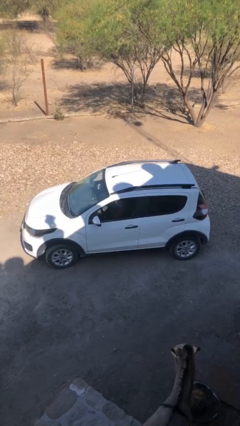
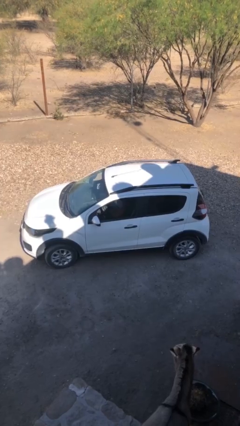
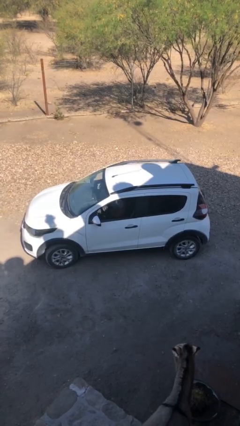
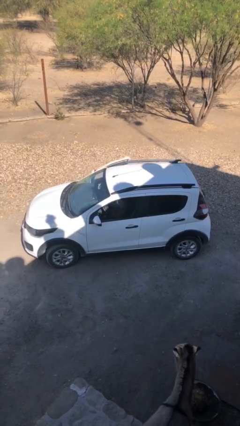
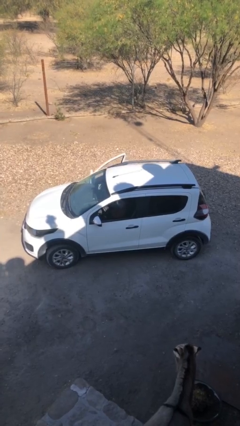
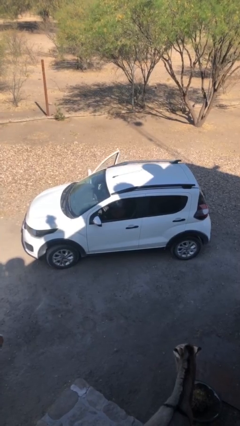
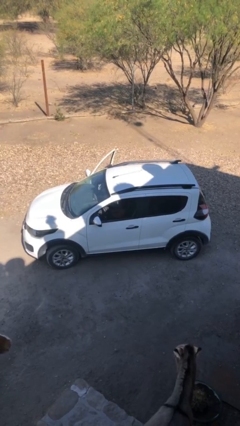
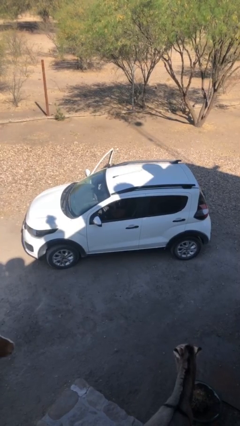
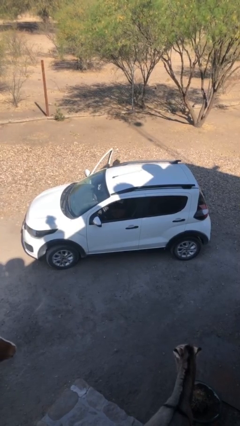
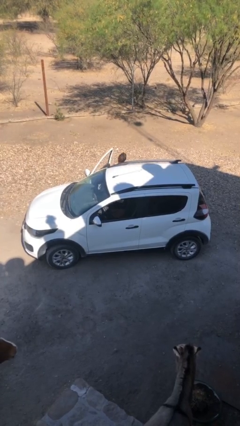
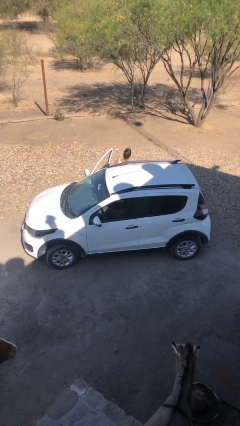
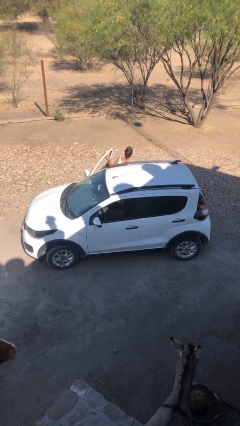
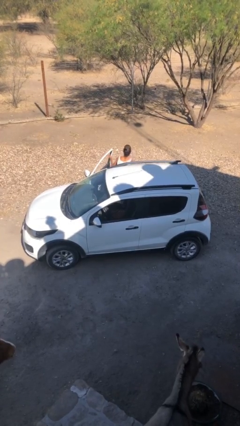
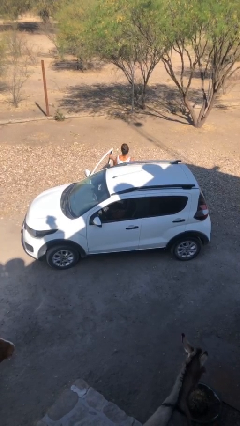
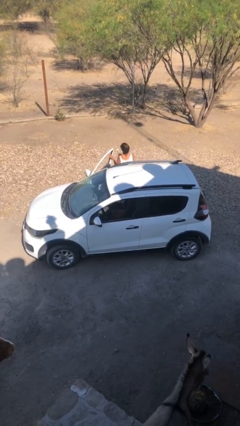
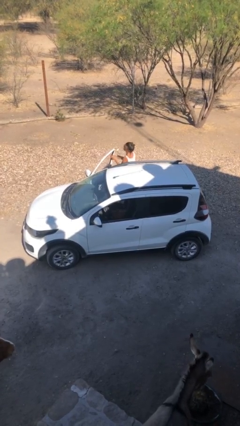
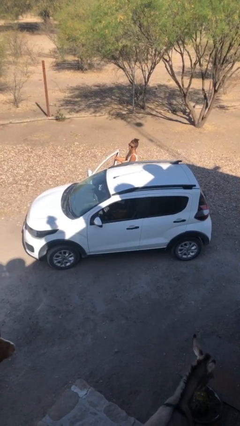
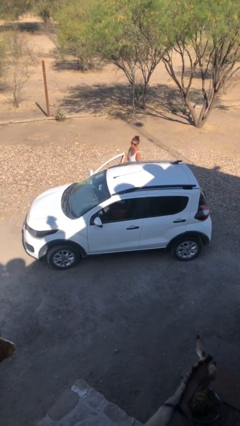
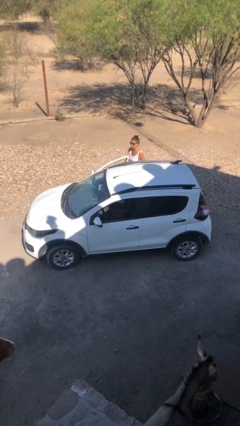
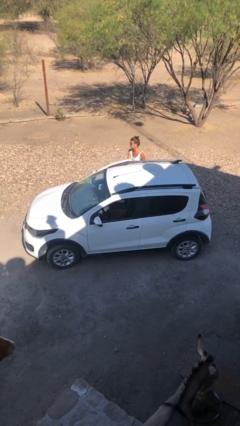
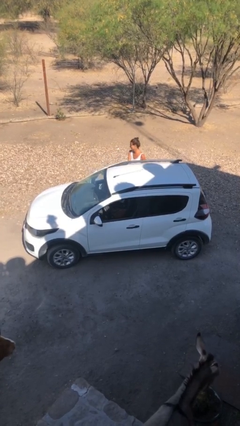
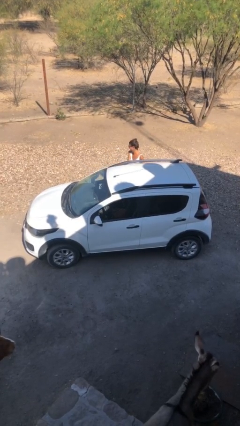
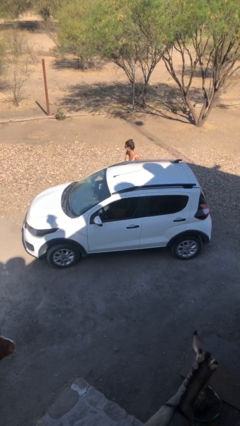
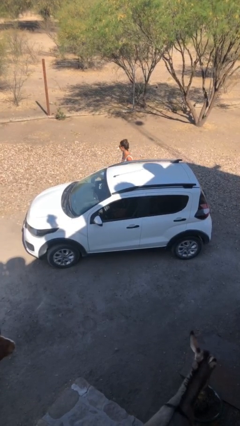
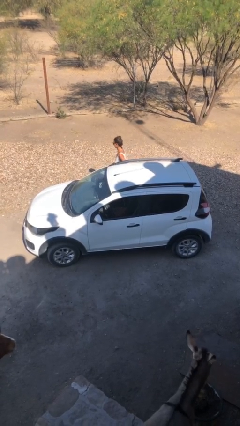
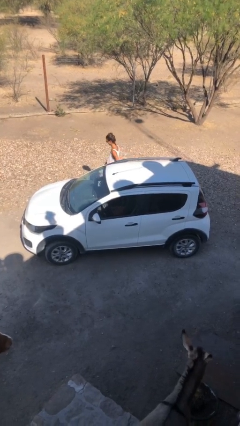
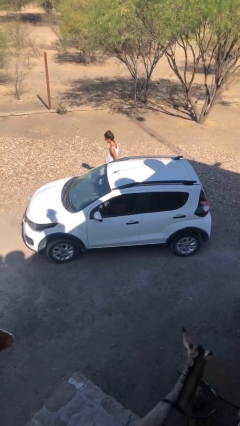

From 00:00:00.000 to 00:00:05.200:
car drops off person

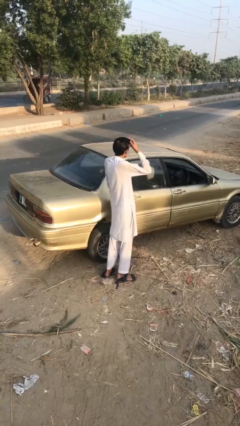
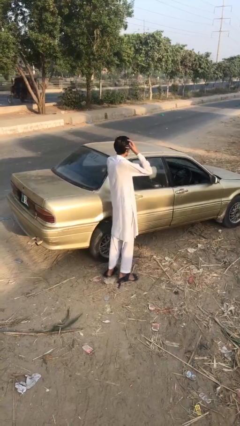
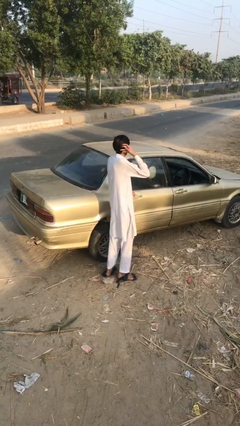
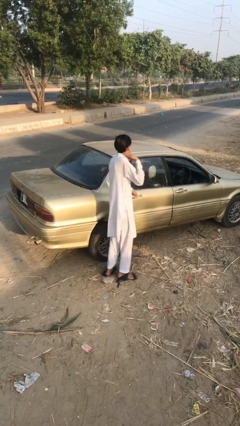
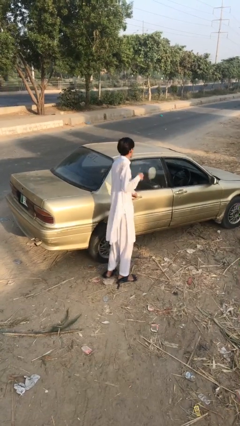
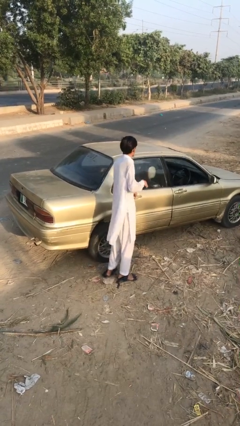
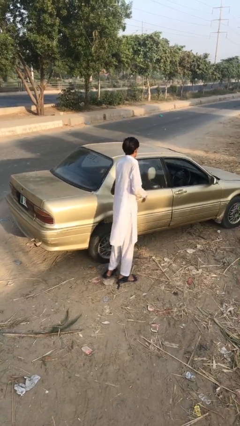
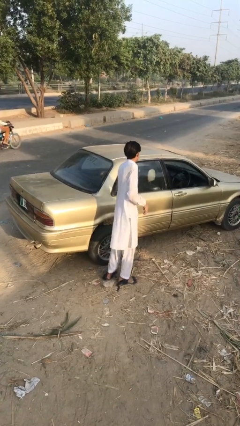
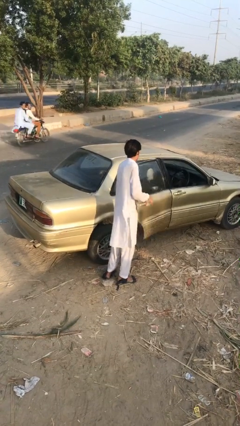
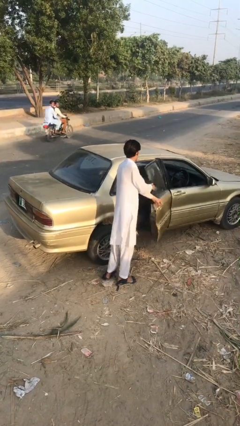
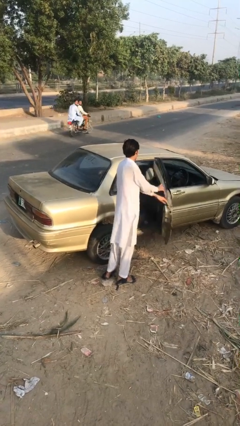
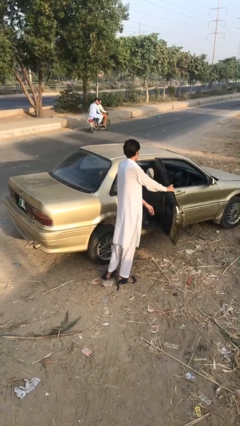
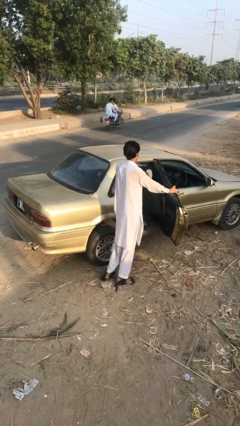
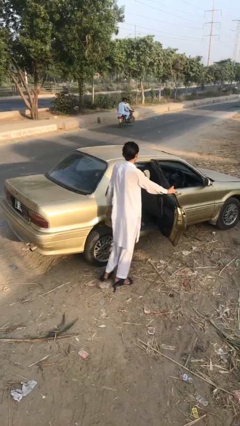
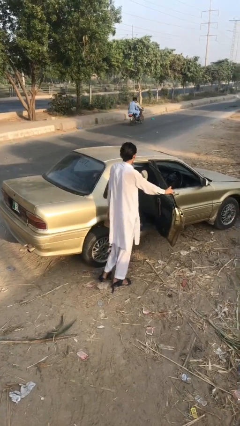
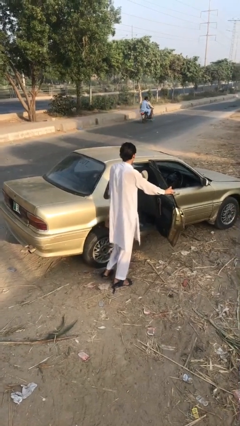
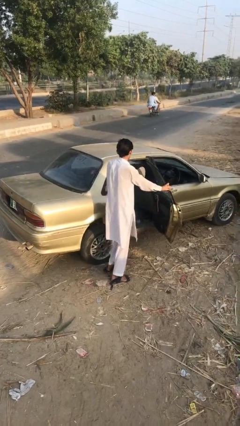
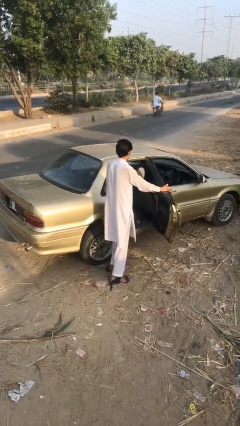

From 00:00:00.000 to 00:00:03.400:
person unloads car

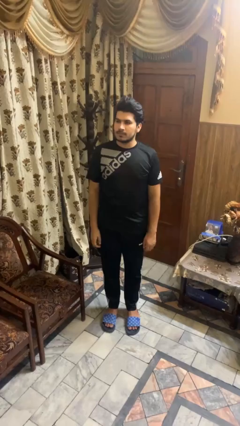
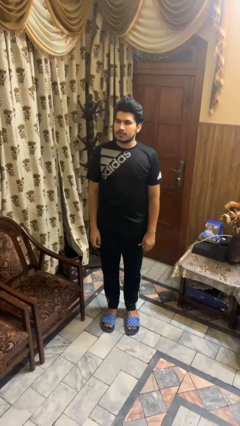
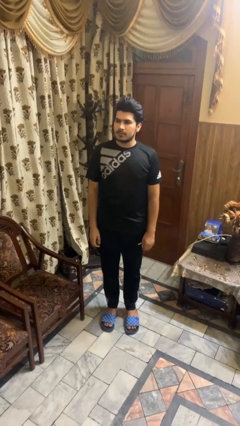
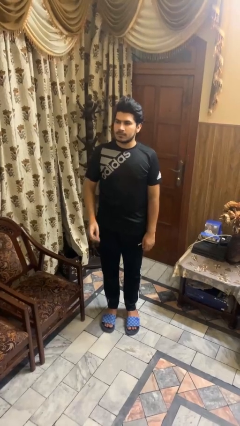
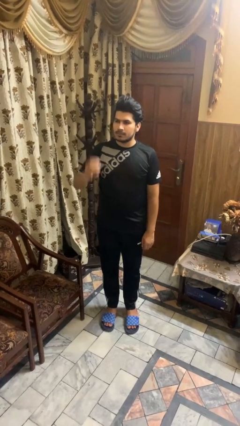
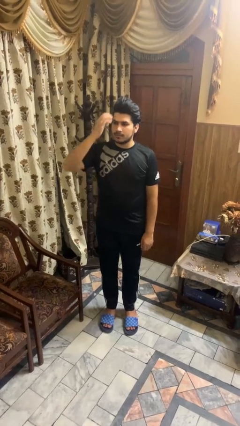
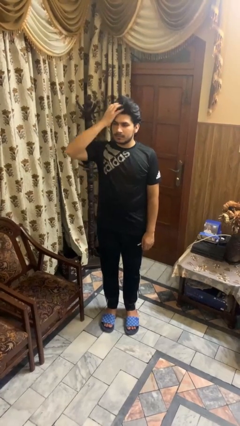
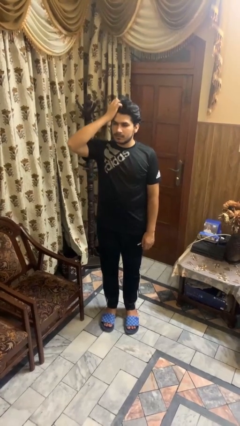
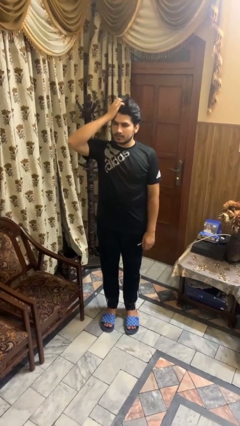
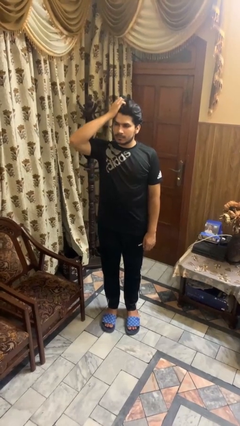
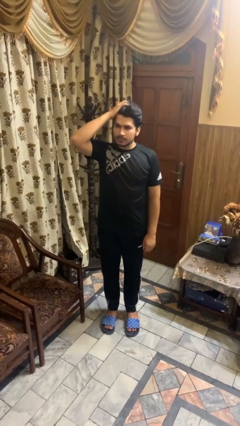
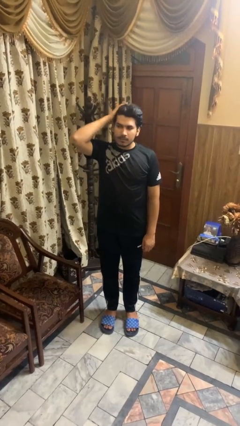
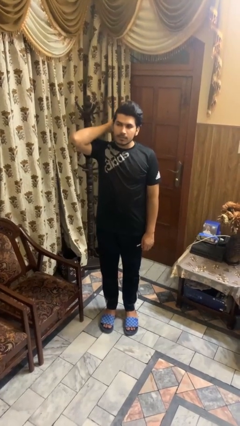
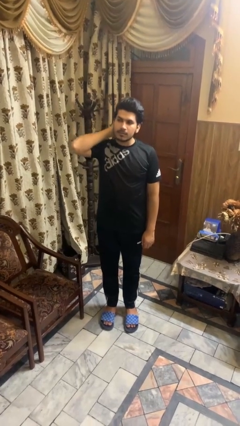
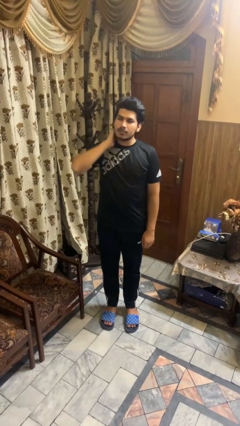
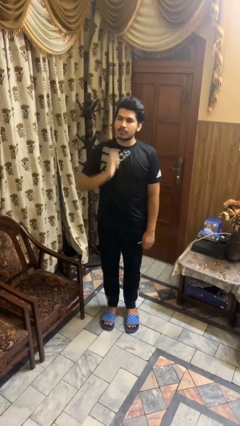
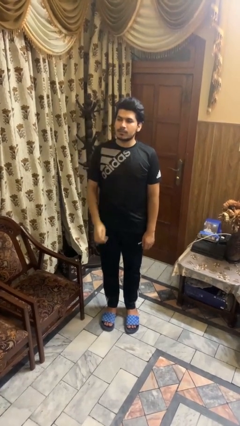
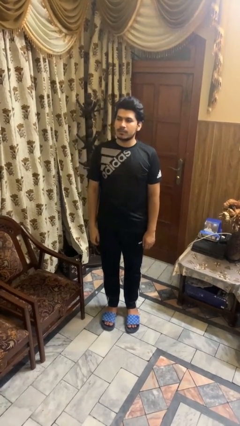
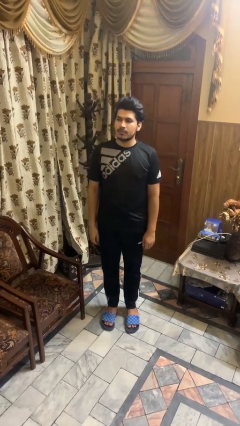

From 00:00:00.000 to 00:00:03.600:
person scratches face

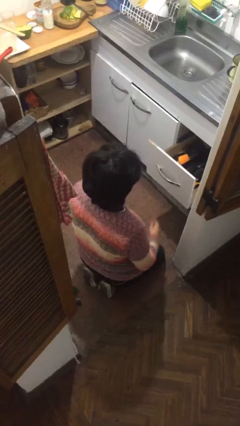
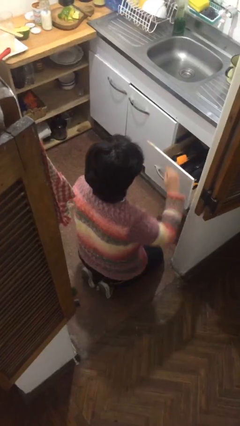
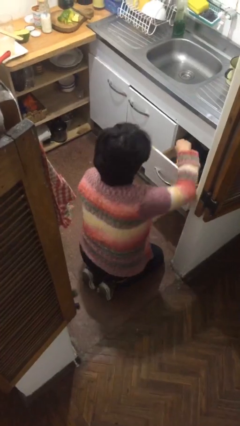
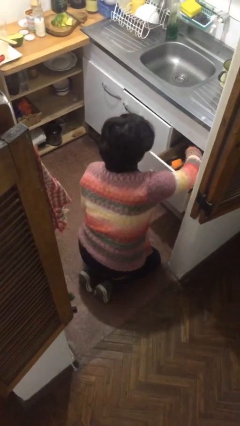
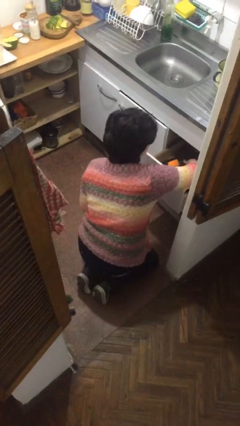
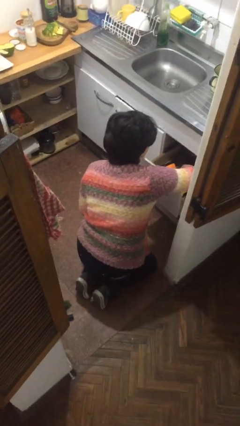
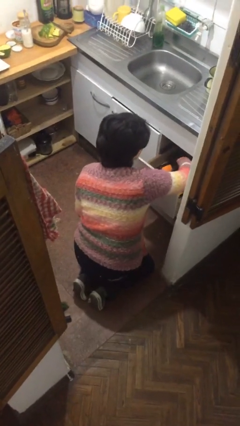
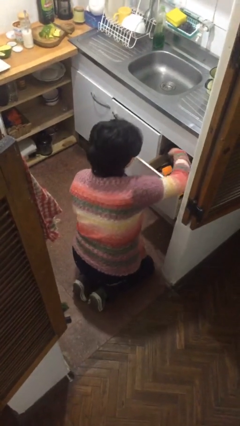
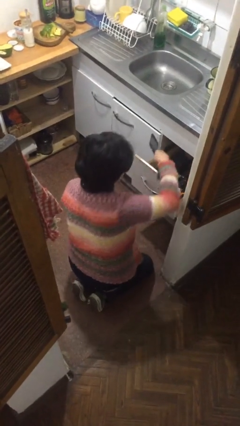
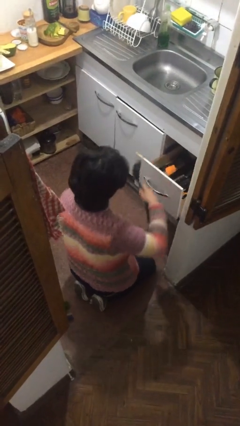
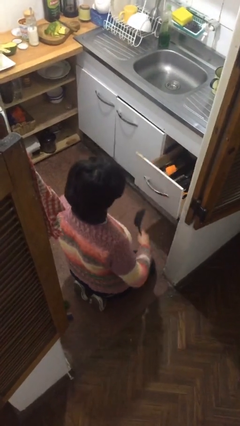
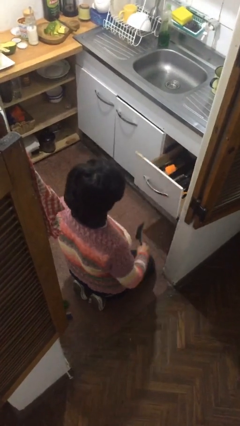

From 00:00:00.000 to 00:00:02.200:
person takes object from kitchen drawer

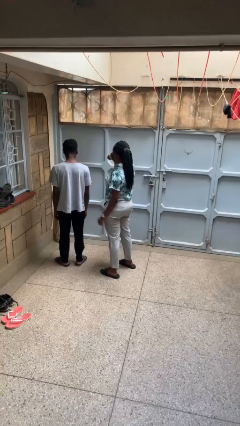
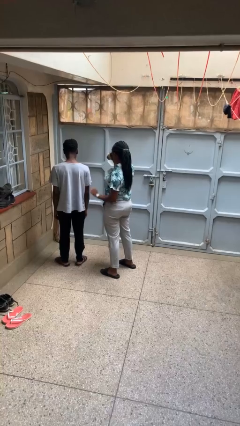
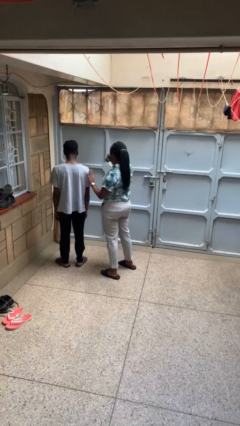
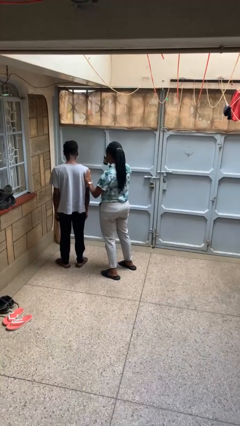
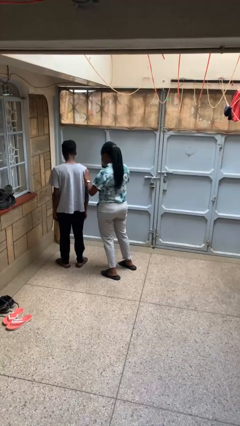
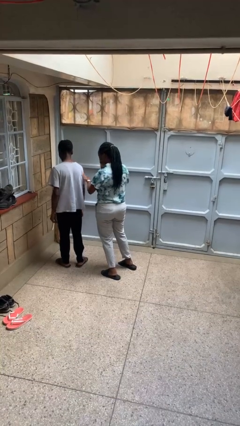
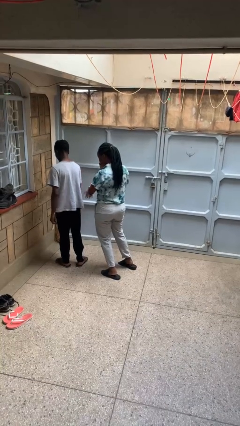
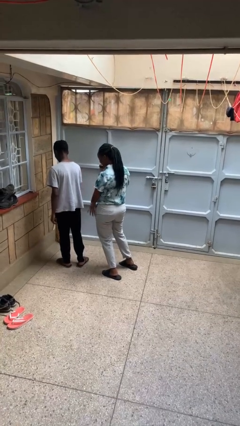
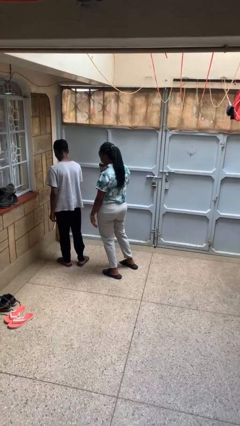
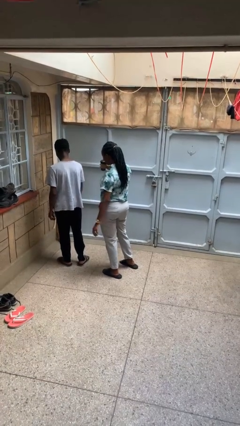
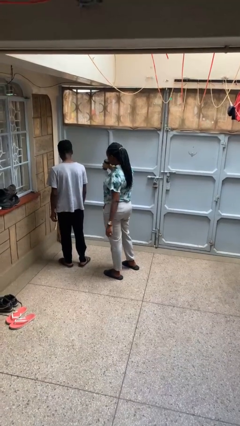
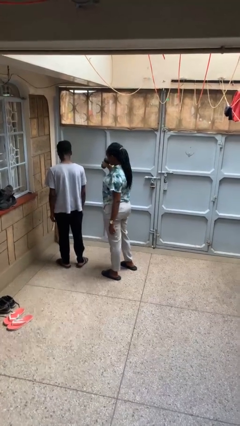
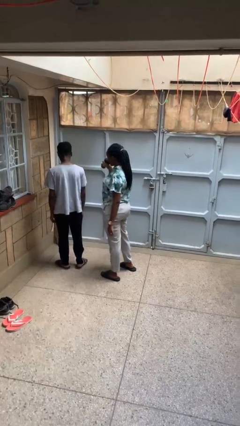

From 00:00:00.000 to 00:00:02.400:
person shoves person

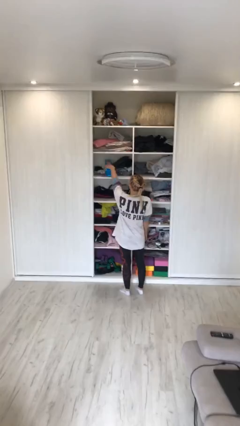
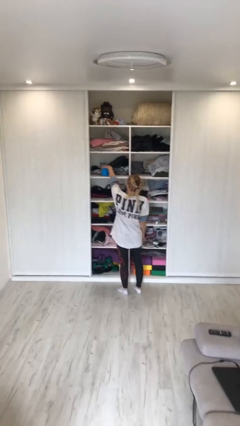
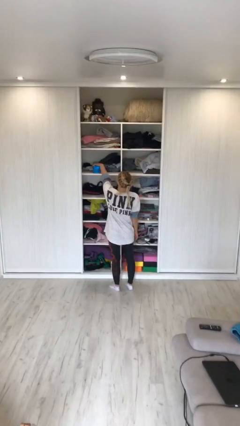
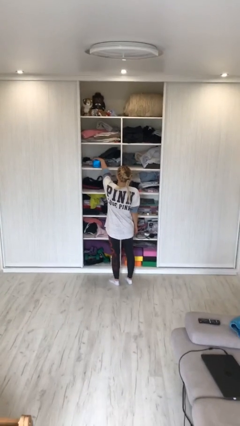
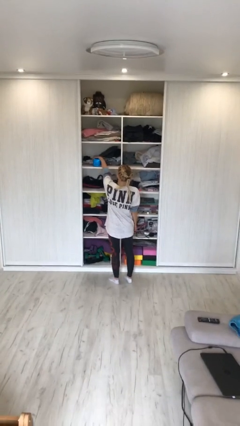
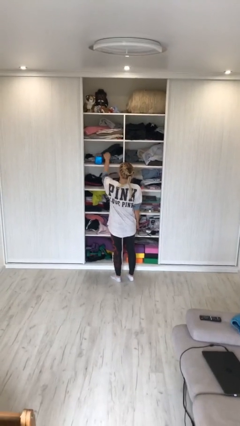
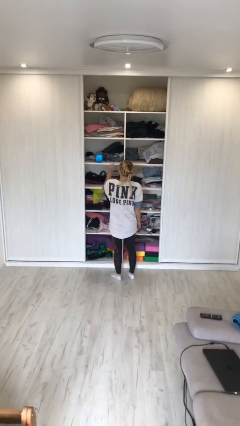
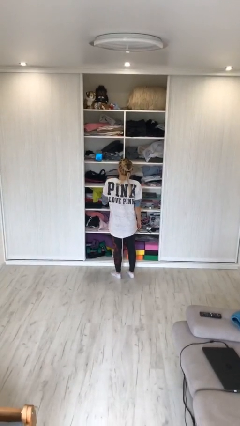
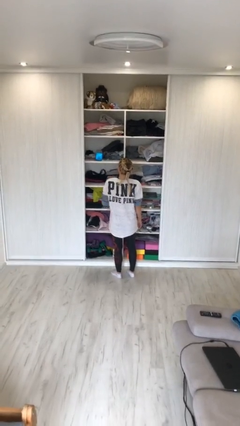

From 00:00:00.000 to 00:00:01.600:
person puts down object on shelf
